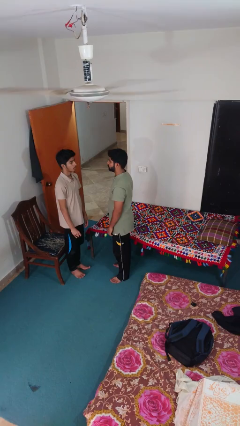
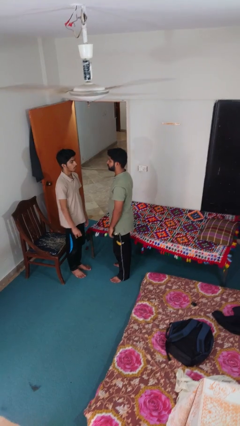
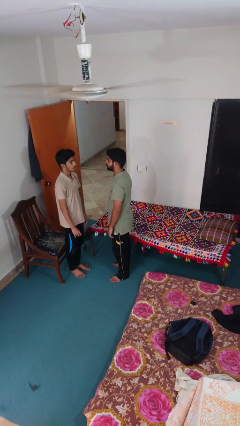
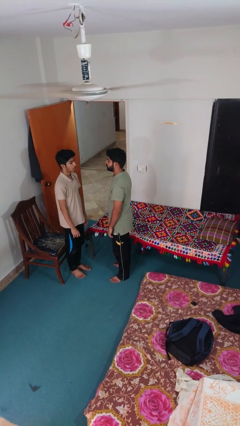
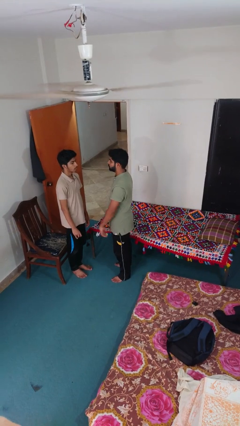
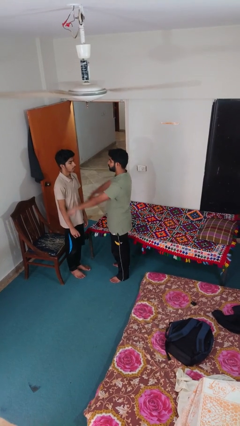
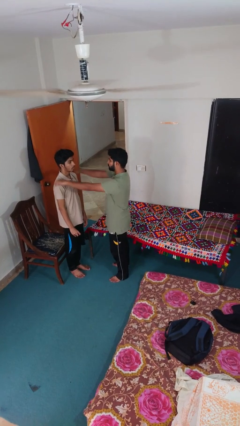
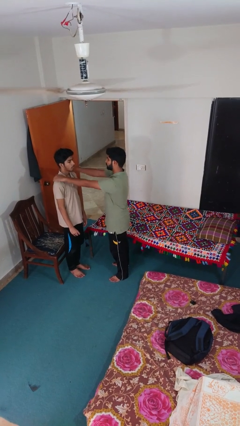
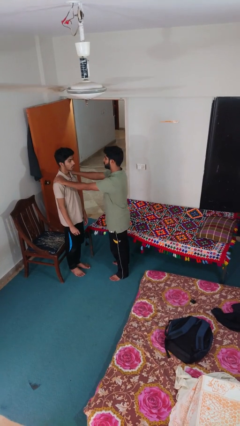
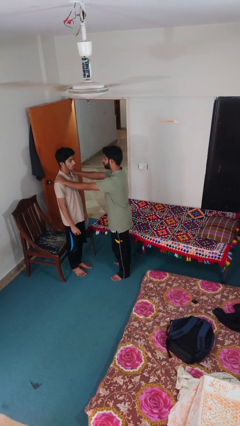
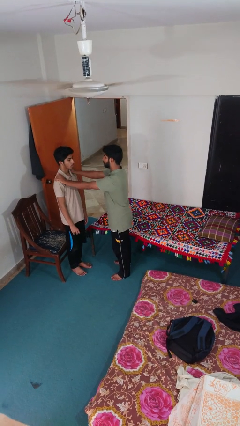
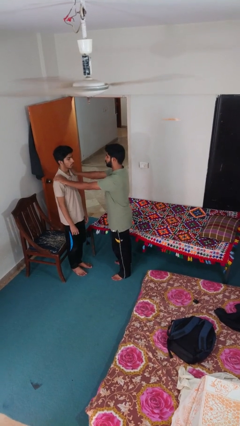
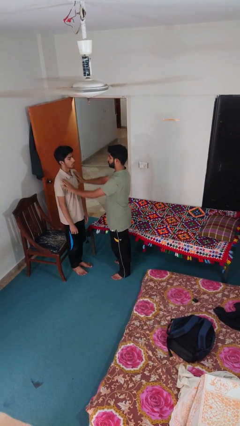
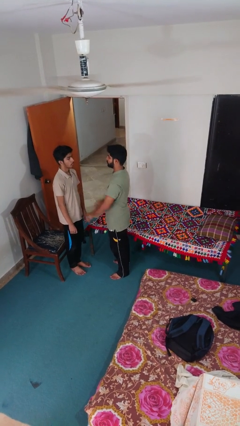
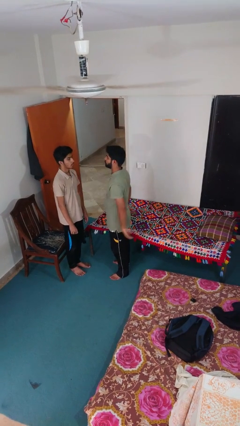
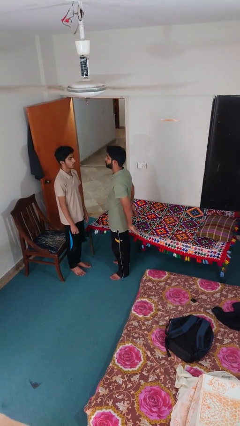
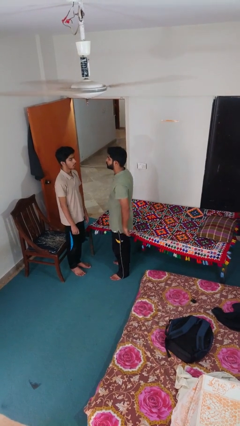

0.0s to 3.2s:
person pounds shoulders of person

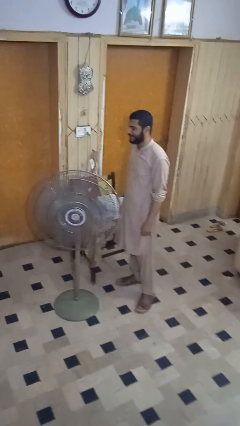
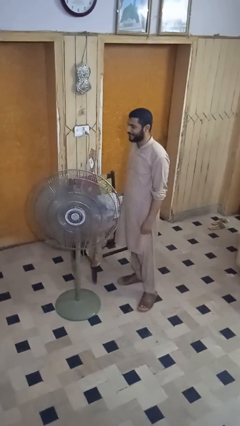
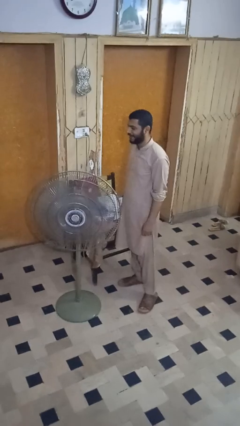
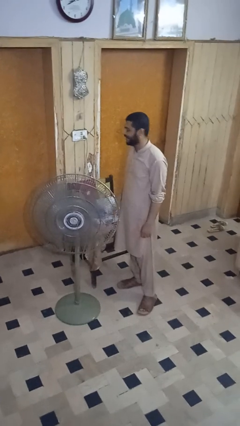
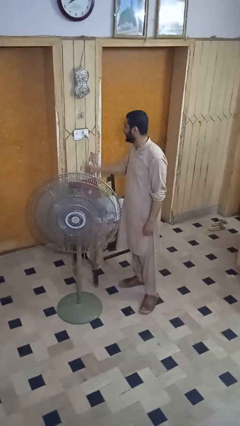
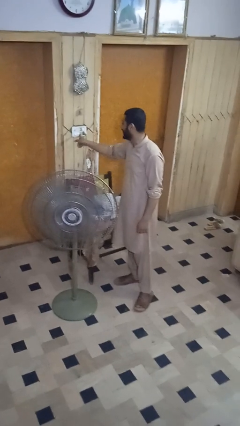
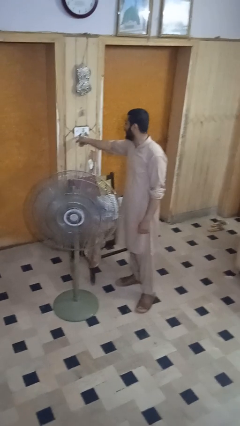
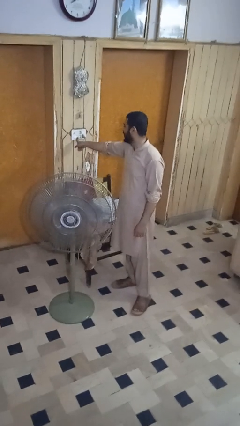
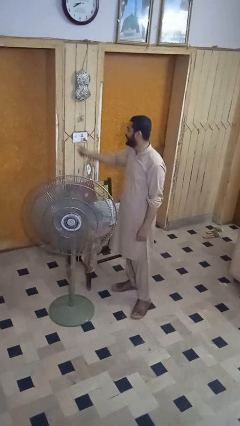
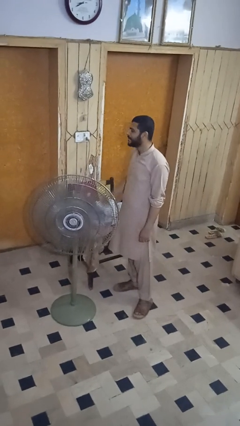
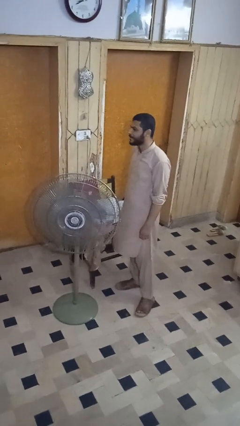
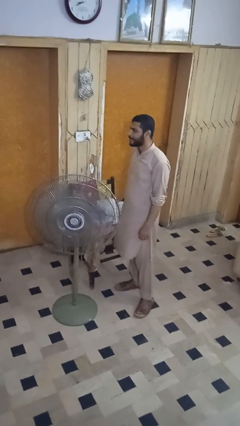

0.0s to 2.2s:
person turns on fan

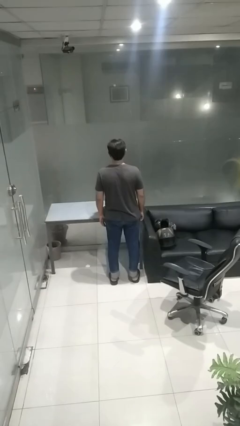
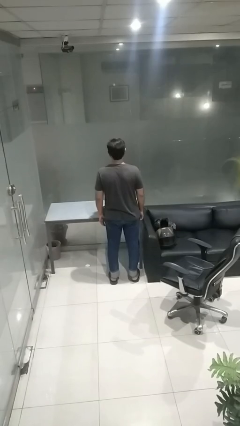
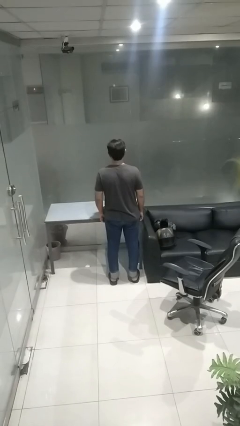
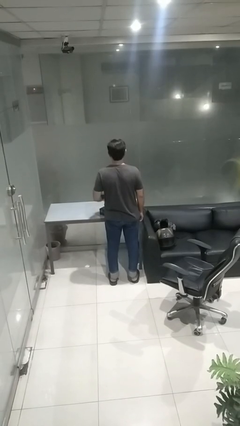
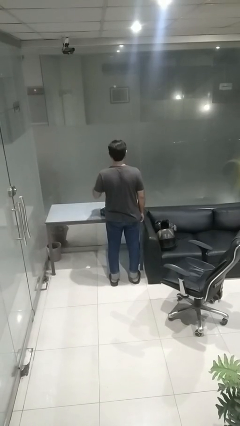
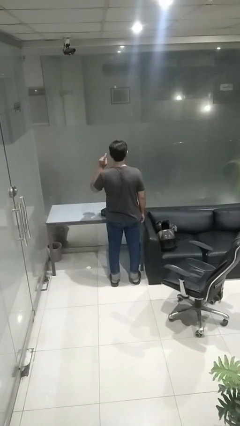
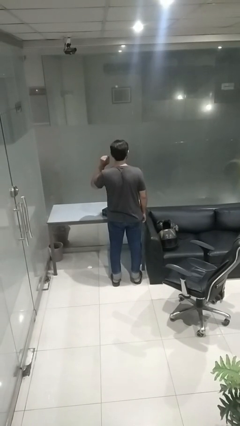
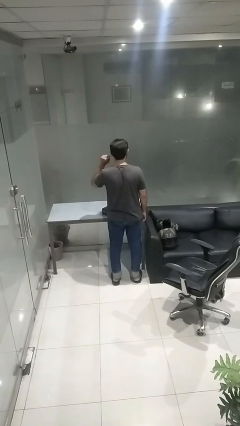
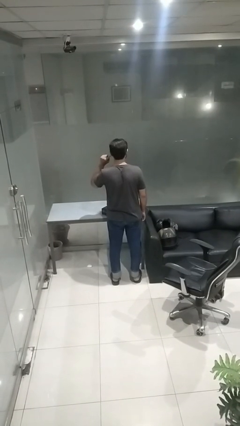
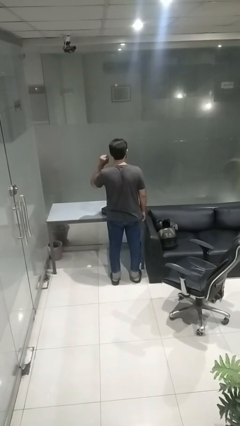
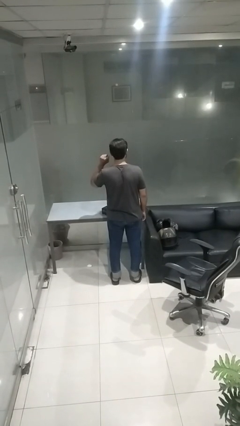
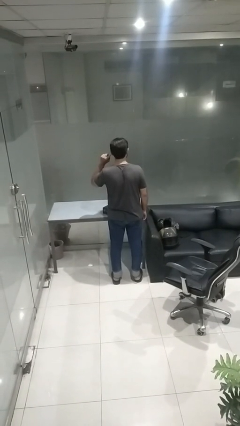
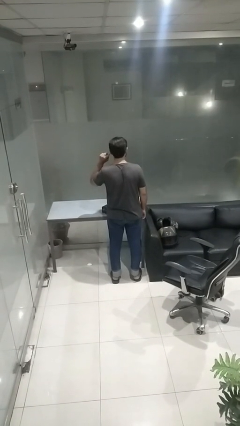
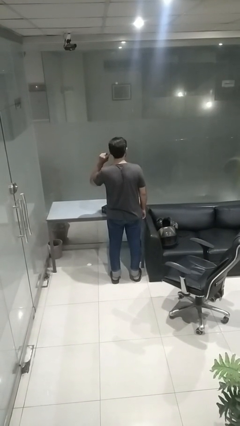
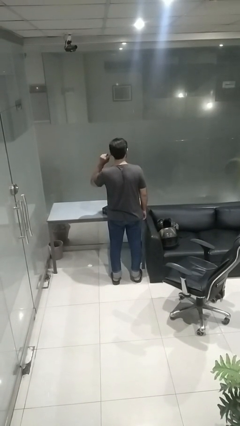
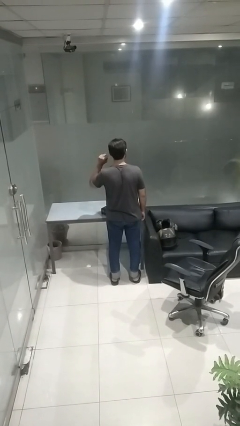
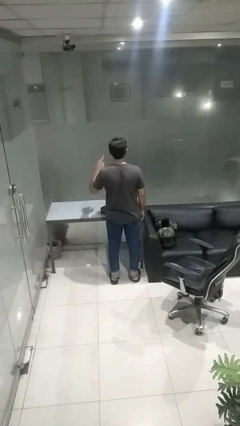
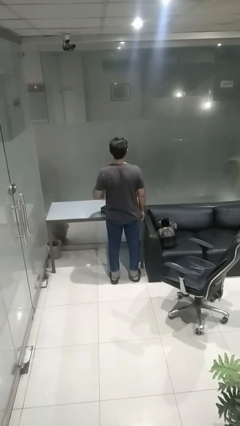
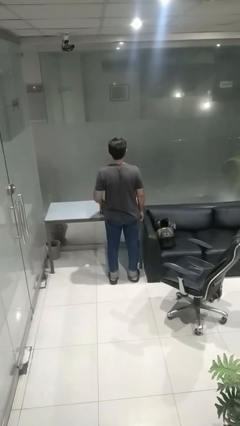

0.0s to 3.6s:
person gestures listen closely

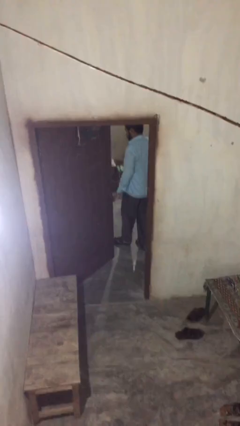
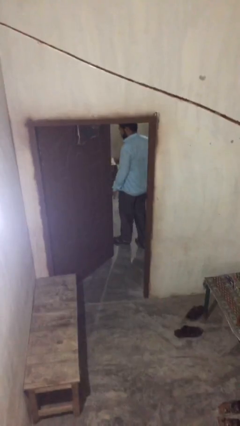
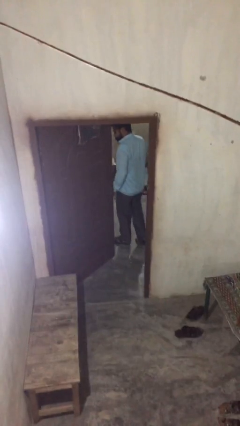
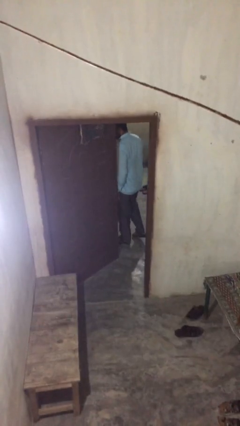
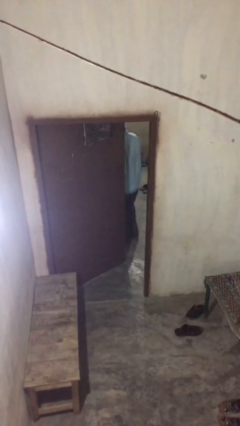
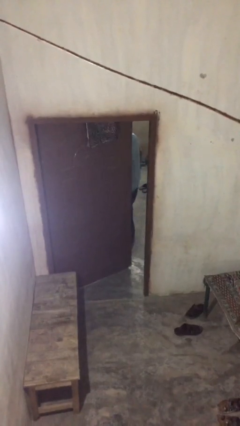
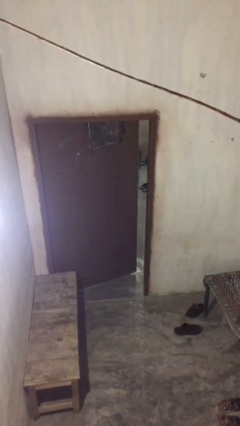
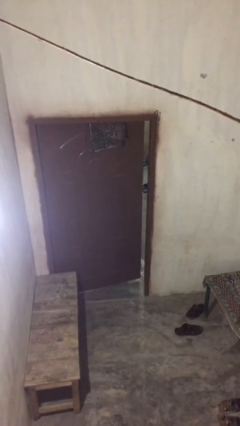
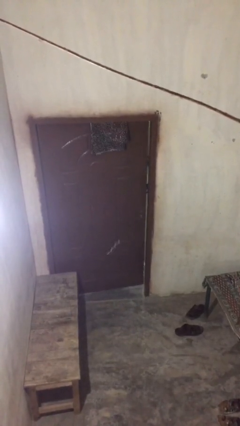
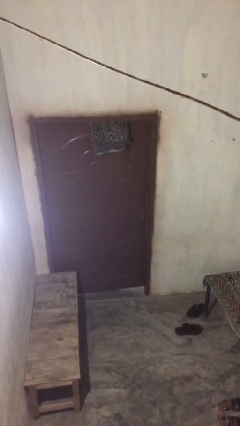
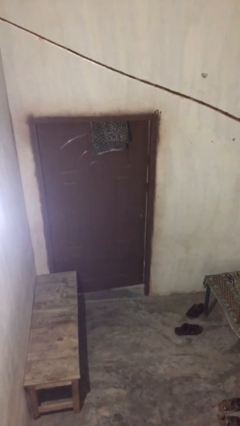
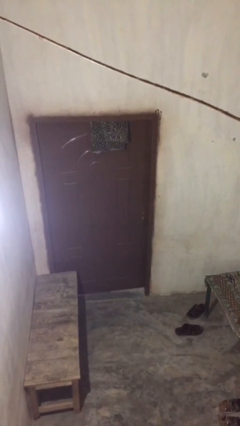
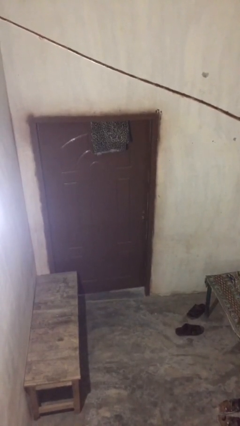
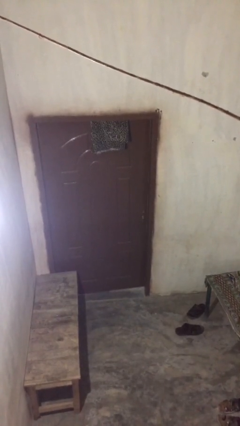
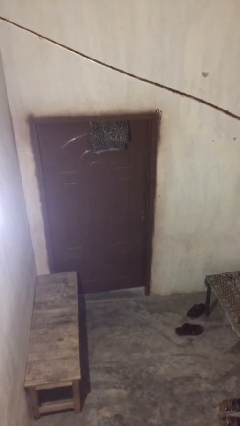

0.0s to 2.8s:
person closes facility door

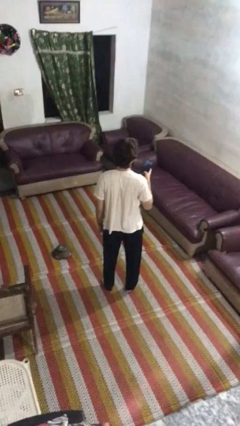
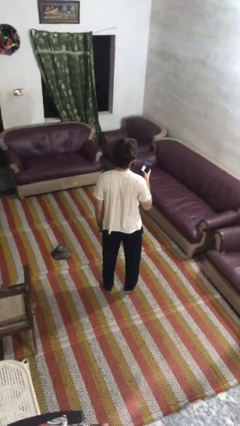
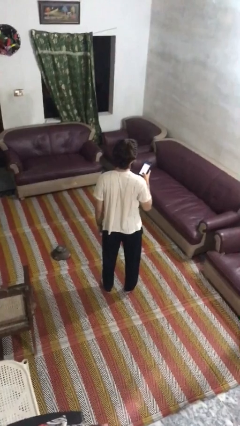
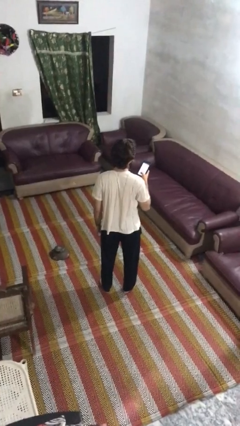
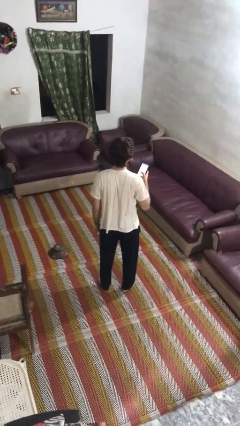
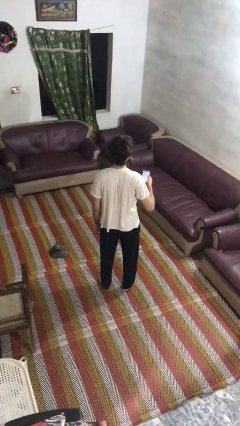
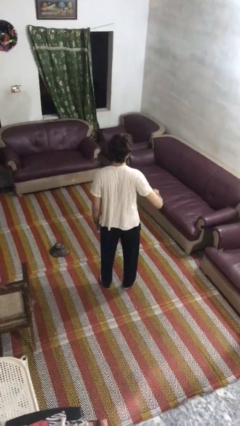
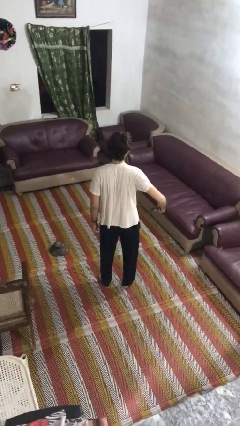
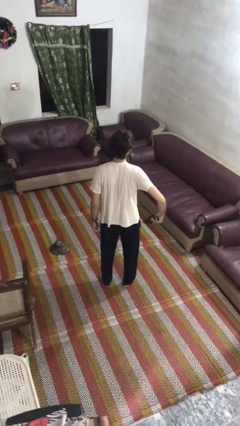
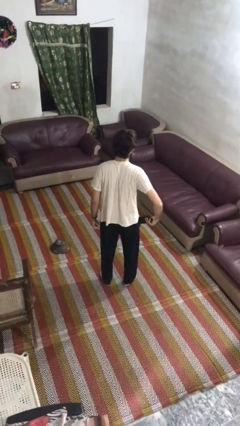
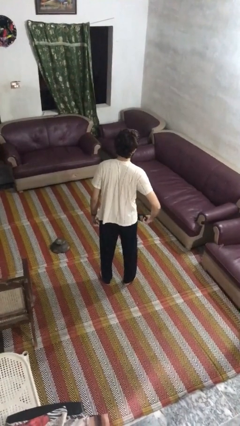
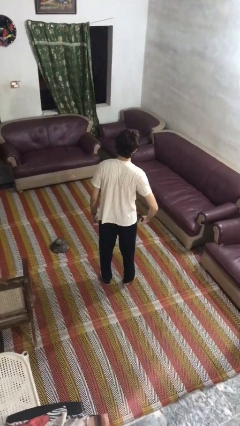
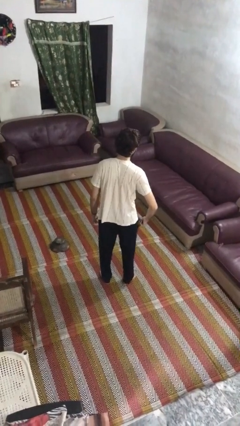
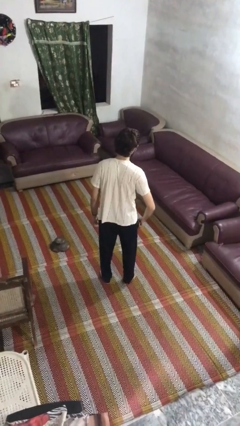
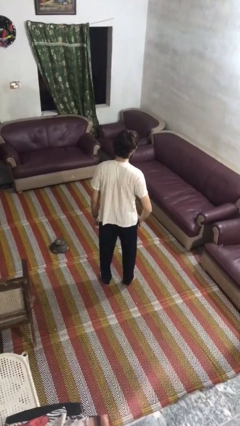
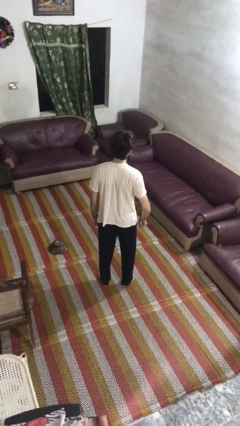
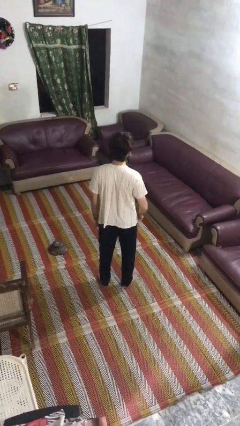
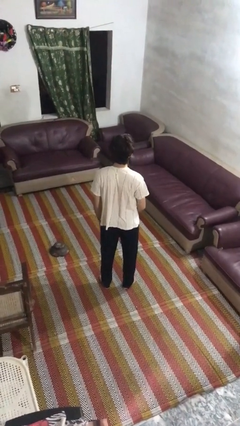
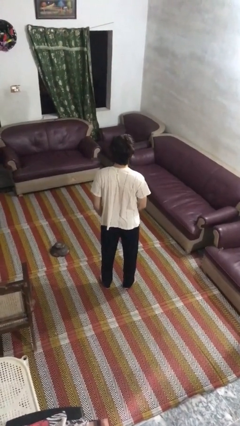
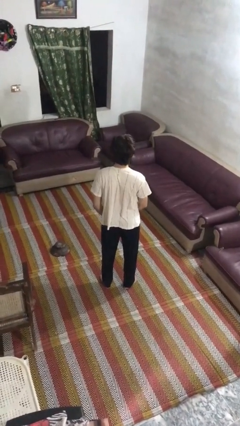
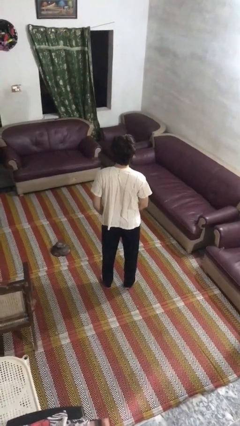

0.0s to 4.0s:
person puts phone into pocket

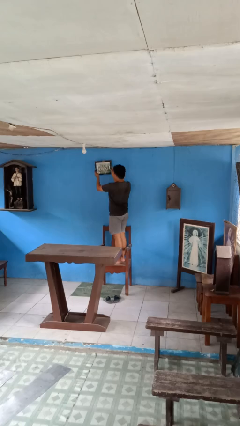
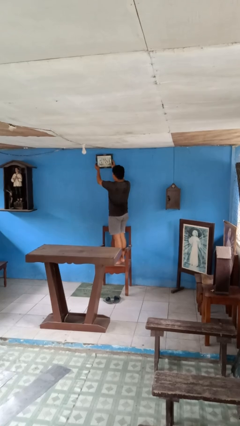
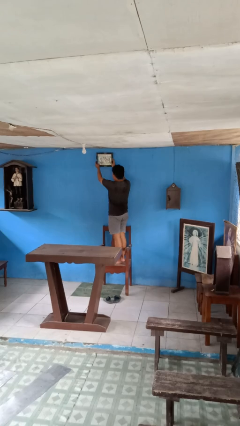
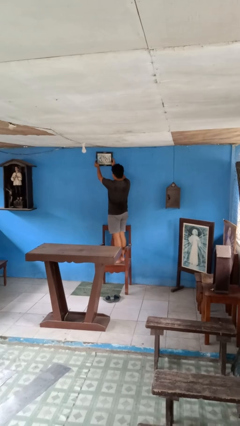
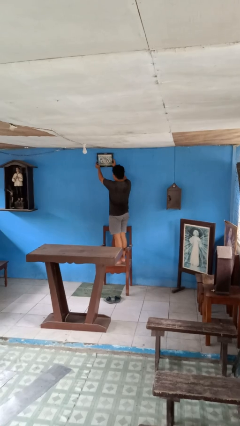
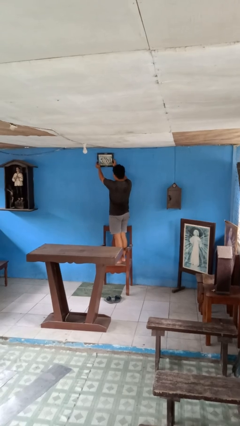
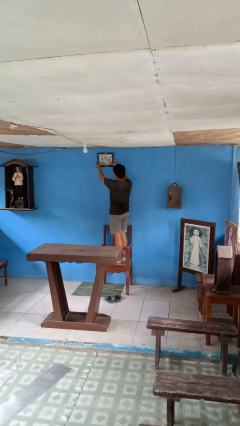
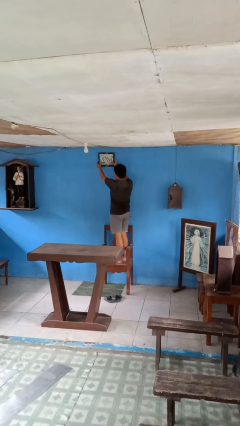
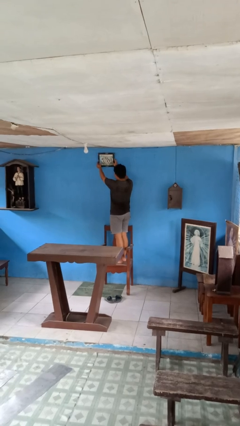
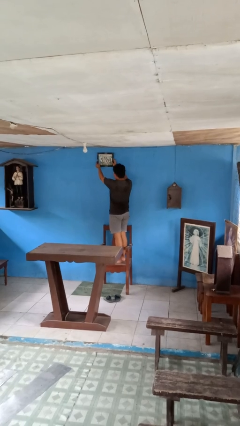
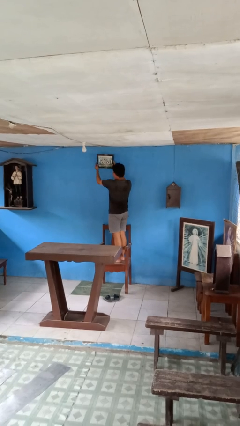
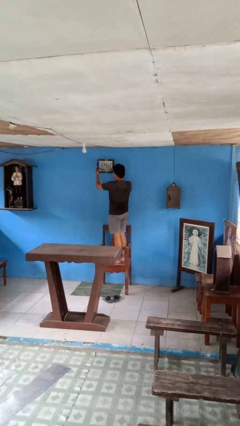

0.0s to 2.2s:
person puts up picture frame
